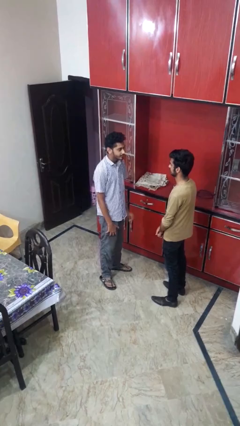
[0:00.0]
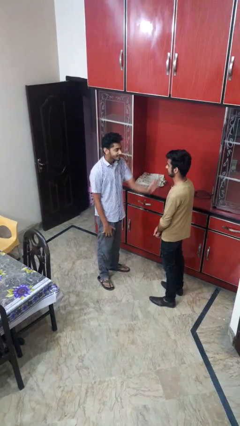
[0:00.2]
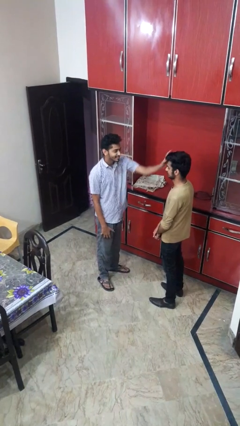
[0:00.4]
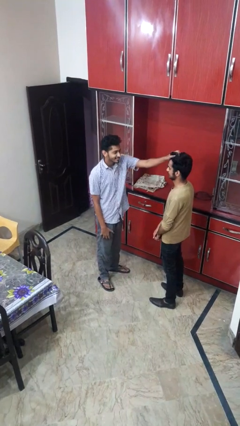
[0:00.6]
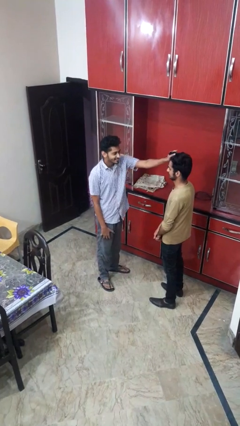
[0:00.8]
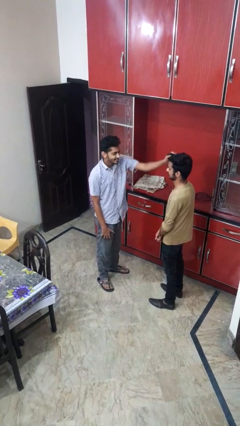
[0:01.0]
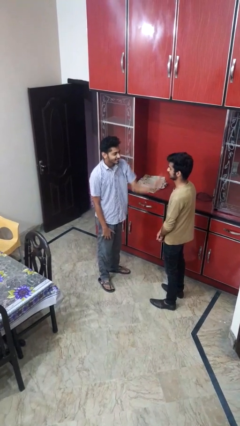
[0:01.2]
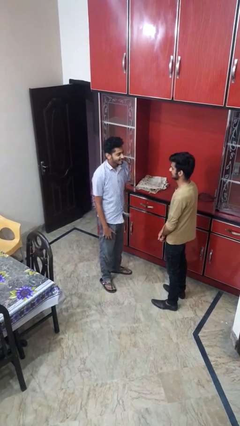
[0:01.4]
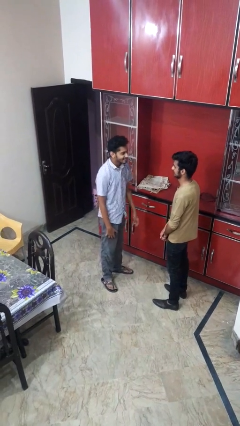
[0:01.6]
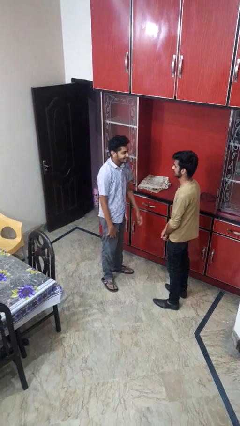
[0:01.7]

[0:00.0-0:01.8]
person grabs person by hair

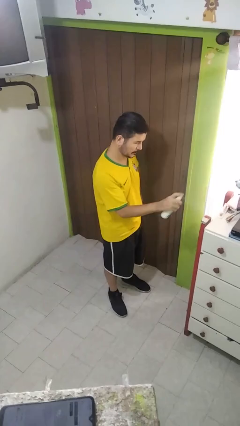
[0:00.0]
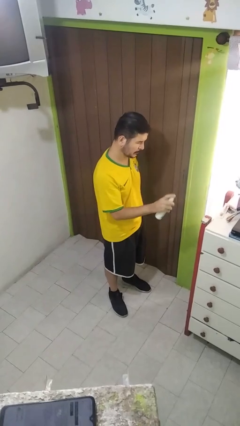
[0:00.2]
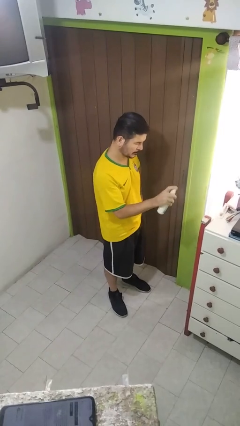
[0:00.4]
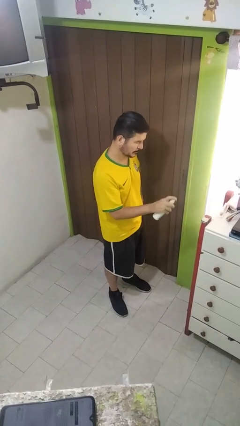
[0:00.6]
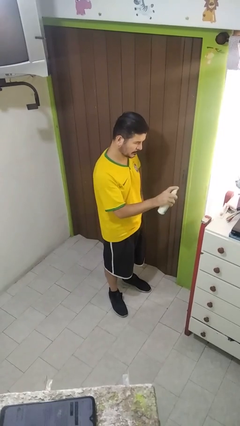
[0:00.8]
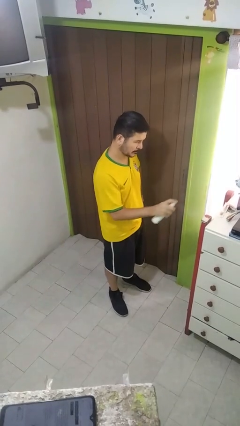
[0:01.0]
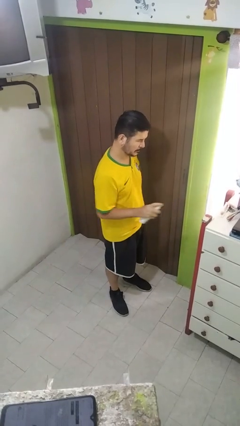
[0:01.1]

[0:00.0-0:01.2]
person sprays from bottle

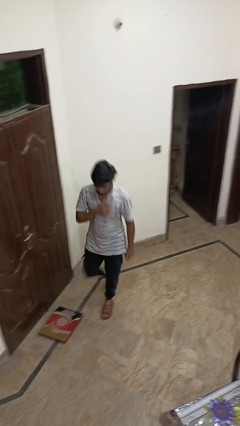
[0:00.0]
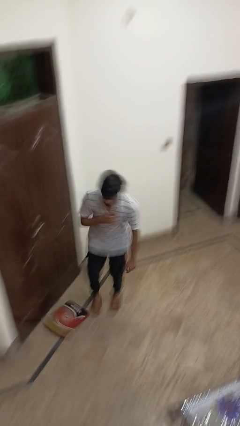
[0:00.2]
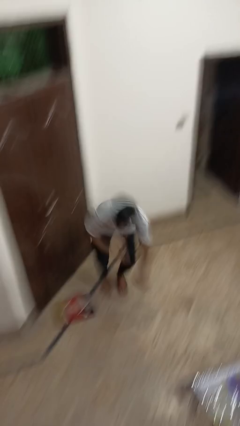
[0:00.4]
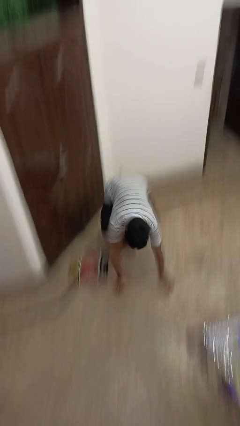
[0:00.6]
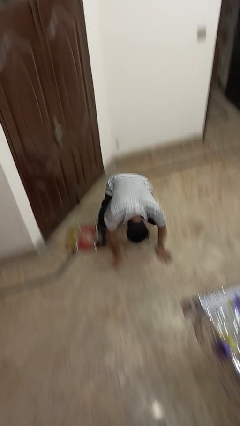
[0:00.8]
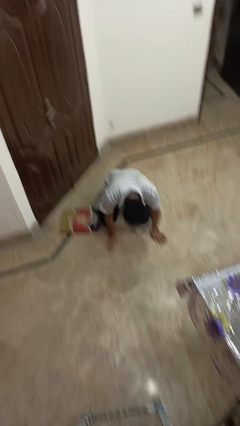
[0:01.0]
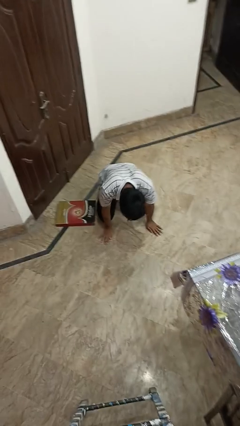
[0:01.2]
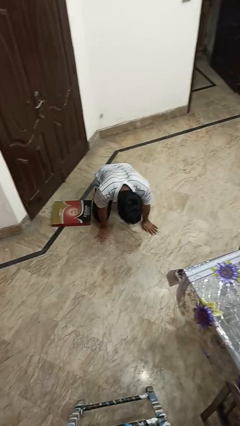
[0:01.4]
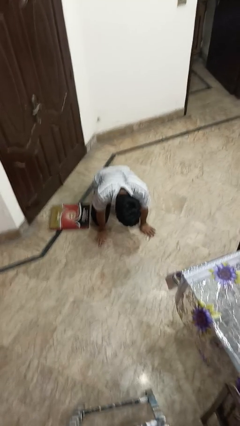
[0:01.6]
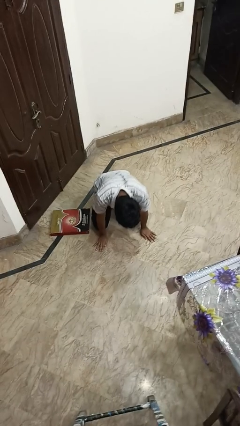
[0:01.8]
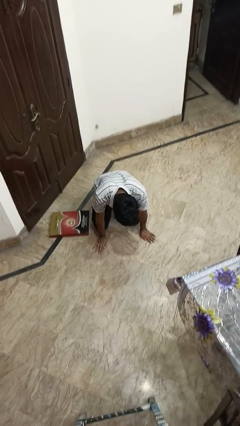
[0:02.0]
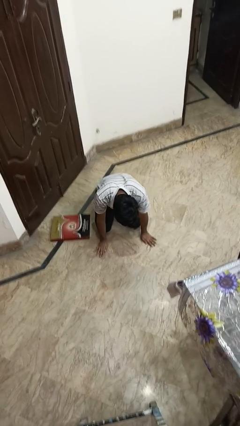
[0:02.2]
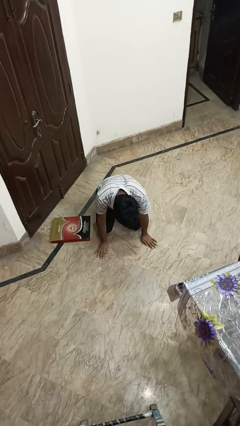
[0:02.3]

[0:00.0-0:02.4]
person trips on object on floor

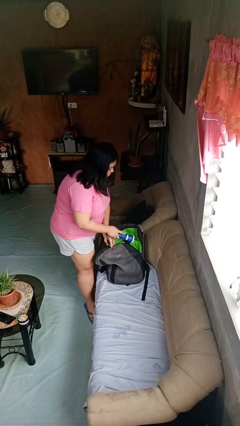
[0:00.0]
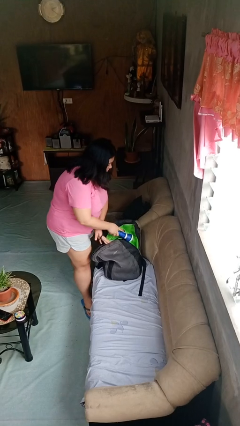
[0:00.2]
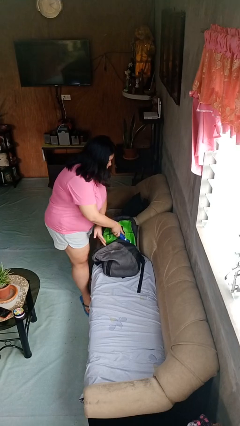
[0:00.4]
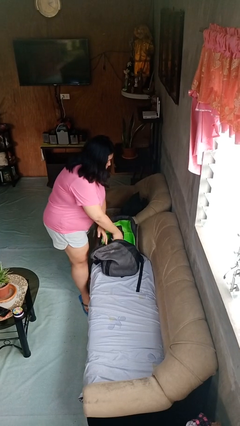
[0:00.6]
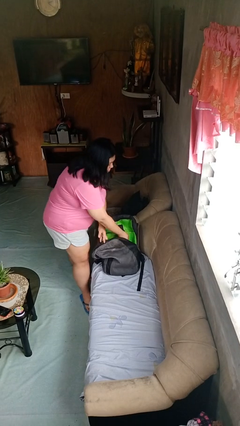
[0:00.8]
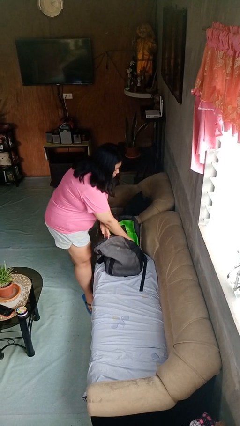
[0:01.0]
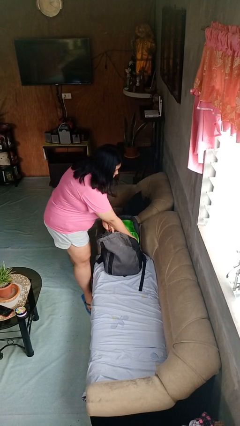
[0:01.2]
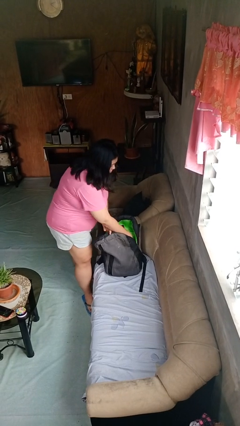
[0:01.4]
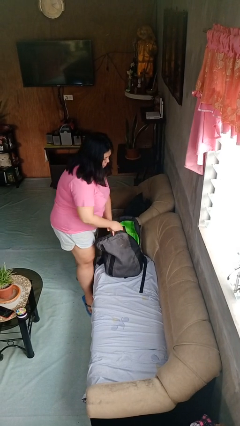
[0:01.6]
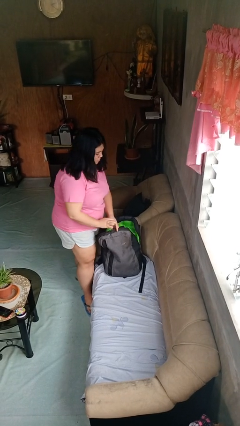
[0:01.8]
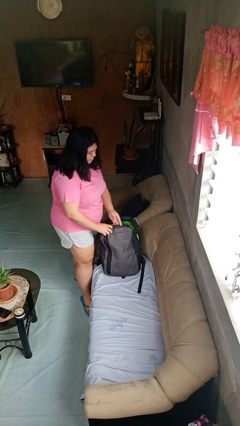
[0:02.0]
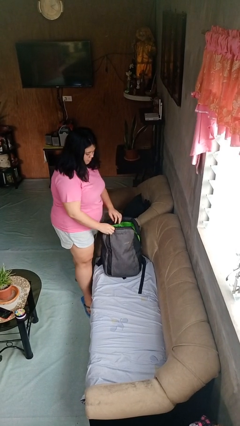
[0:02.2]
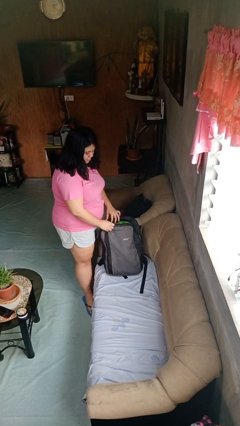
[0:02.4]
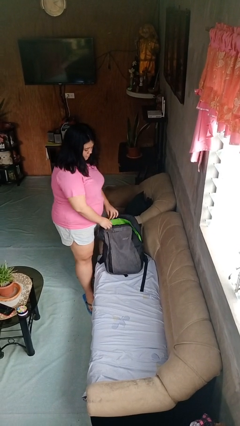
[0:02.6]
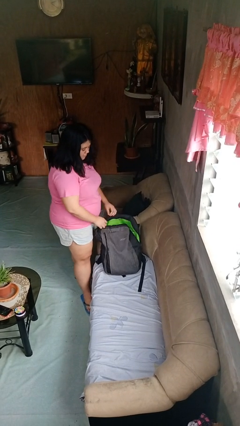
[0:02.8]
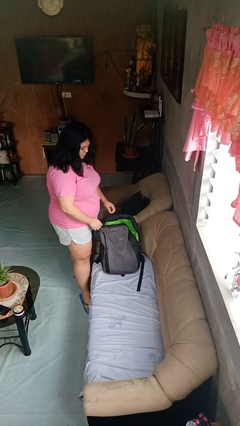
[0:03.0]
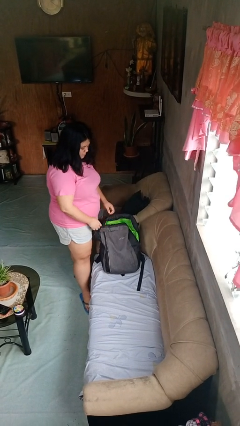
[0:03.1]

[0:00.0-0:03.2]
person puts object into backpack

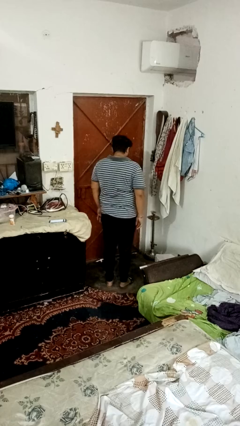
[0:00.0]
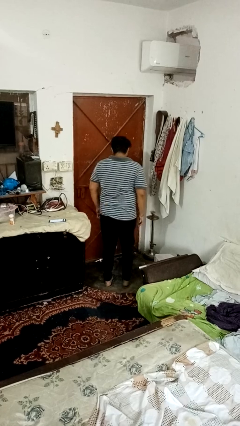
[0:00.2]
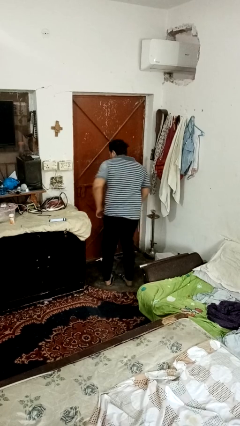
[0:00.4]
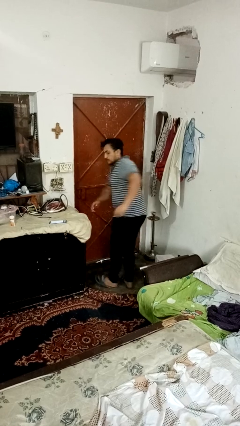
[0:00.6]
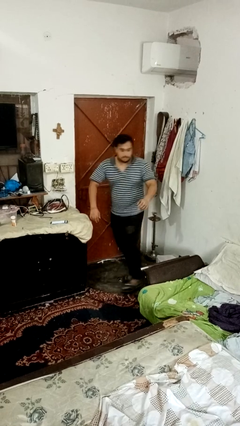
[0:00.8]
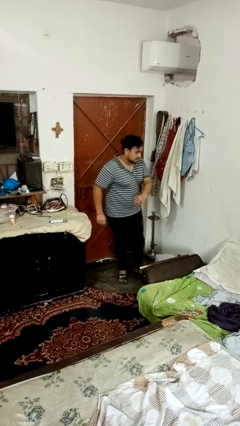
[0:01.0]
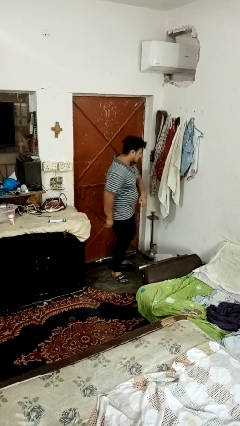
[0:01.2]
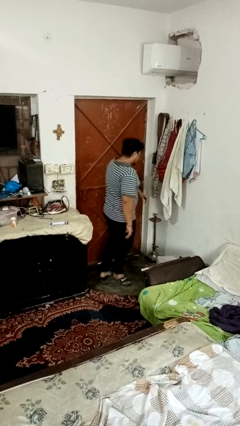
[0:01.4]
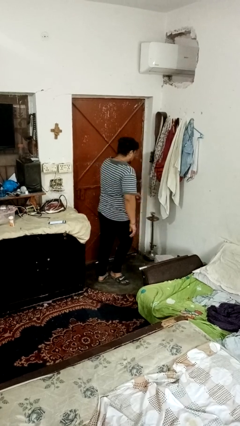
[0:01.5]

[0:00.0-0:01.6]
person twirls

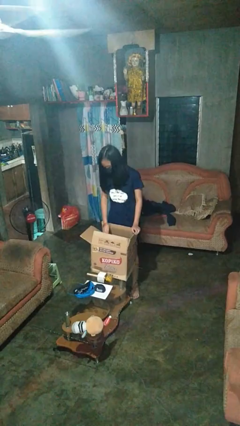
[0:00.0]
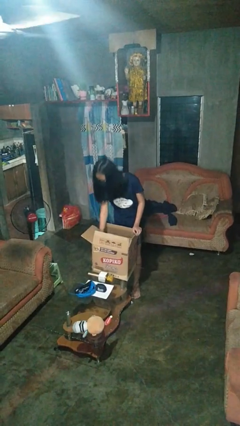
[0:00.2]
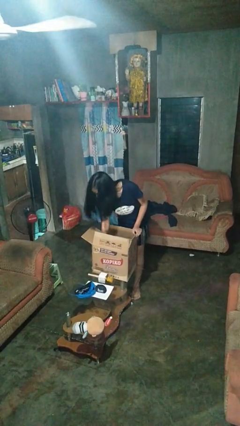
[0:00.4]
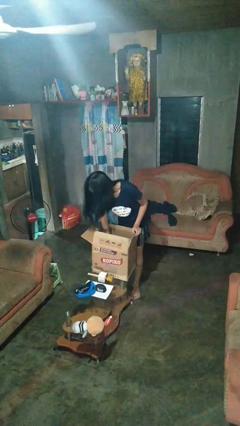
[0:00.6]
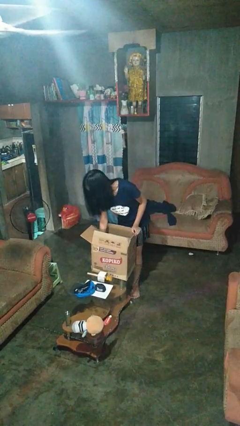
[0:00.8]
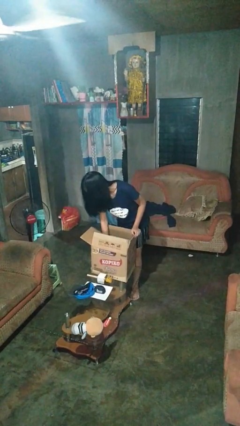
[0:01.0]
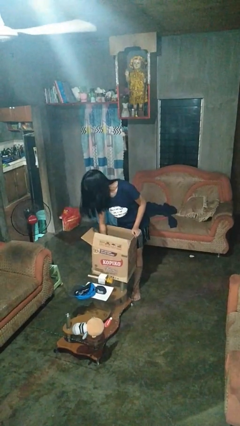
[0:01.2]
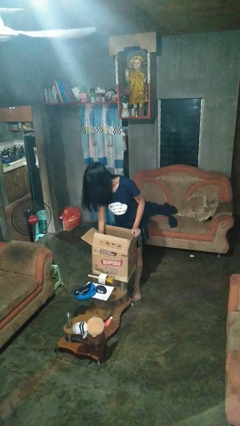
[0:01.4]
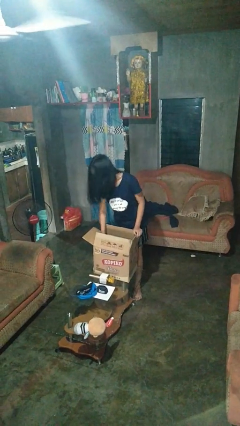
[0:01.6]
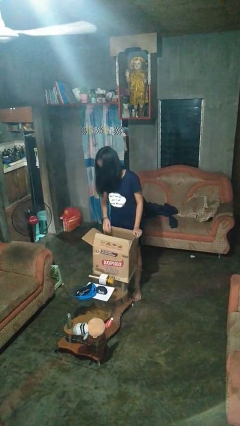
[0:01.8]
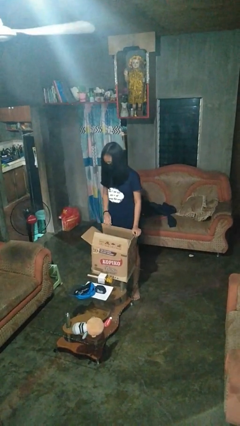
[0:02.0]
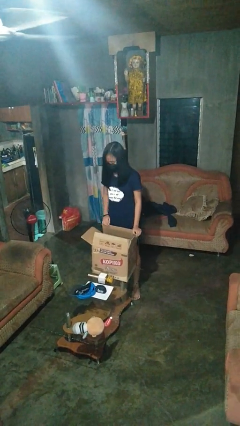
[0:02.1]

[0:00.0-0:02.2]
person searches in box

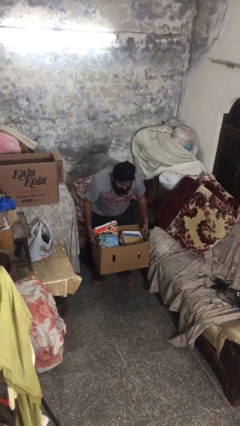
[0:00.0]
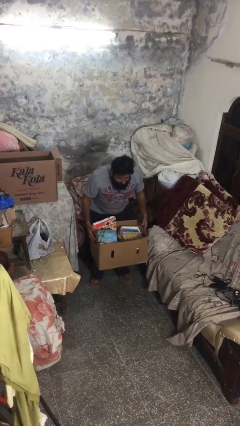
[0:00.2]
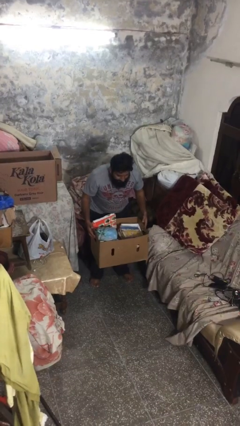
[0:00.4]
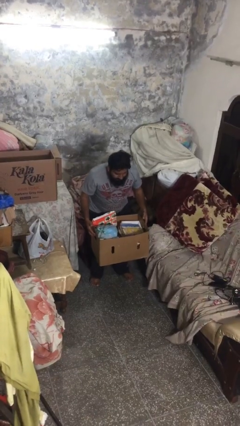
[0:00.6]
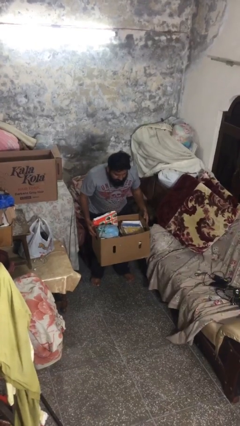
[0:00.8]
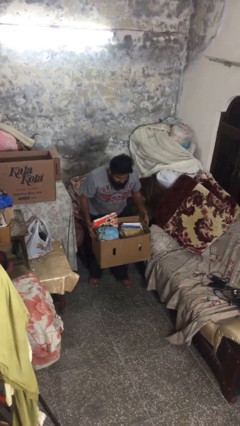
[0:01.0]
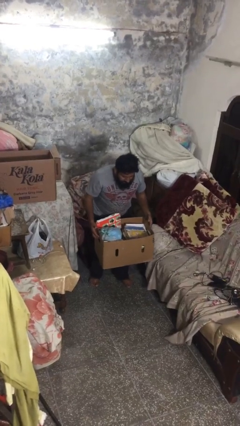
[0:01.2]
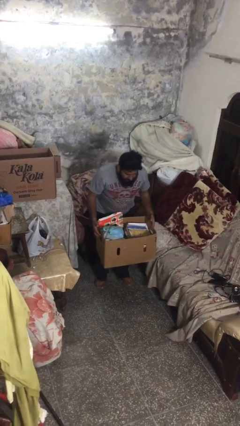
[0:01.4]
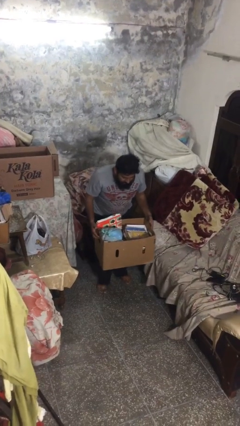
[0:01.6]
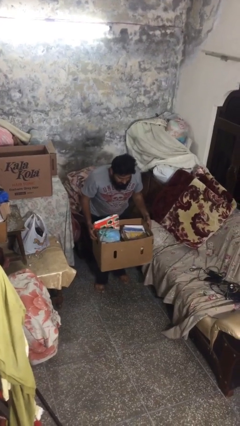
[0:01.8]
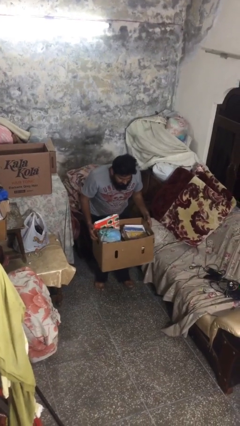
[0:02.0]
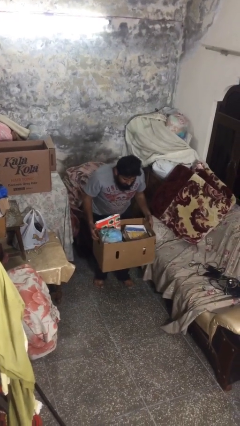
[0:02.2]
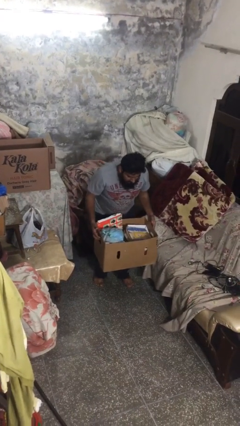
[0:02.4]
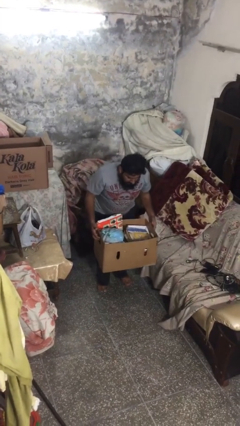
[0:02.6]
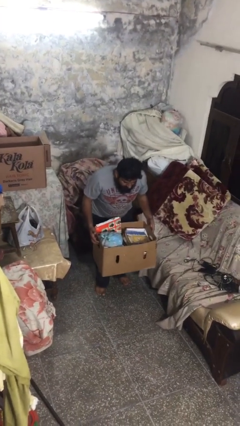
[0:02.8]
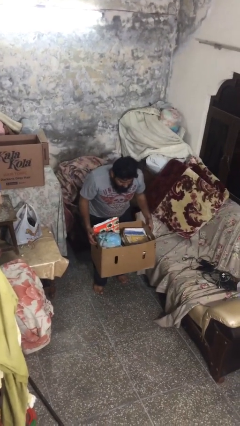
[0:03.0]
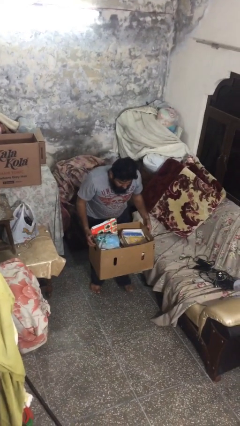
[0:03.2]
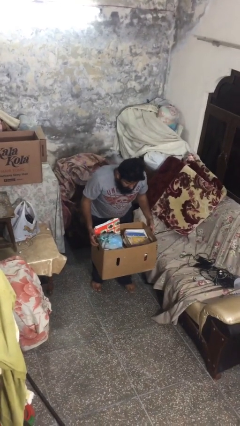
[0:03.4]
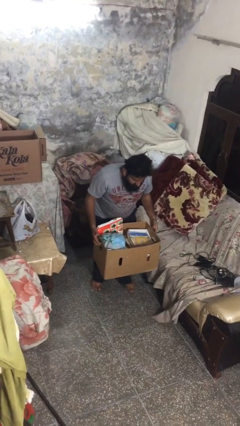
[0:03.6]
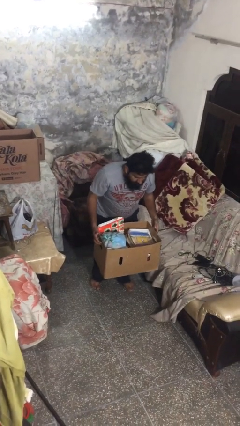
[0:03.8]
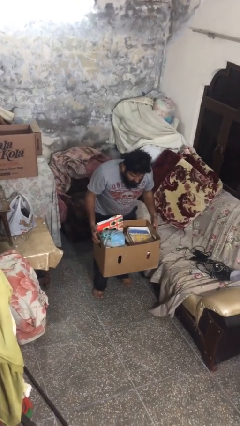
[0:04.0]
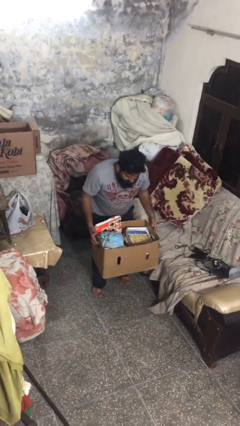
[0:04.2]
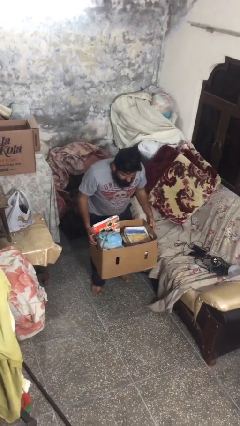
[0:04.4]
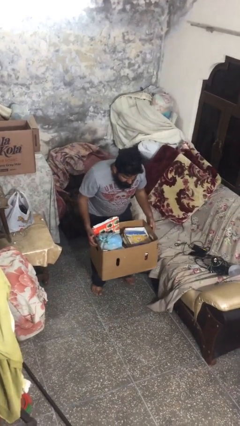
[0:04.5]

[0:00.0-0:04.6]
person carries heavy object
